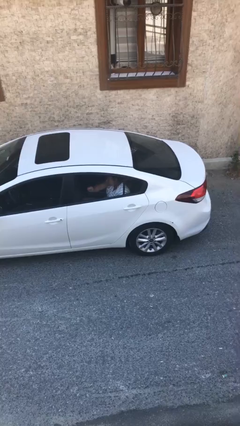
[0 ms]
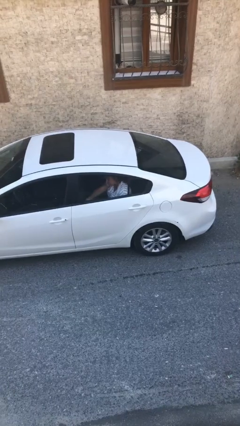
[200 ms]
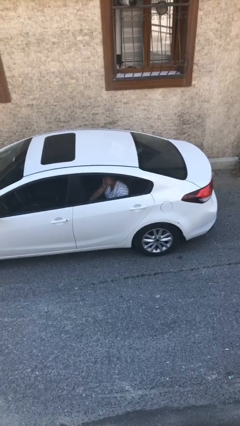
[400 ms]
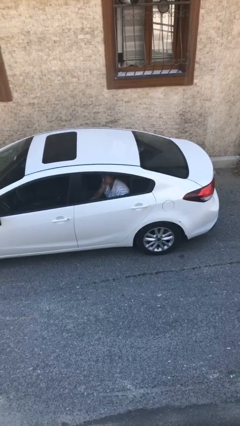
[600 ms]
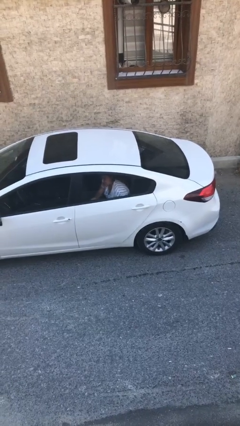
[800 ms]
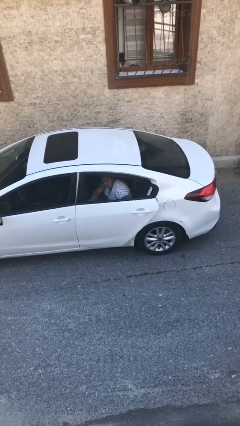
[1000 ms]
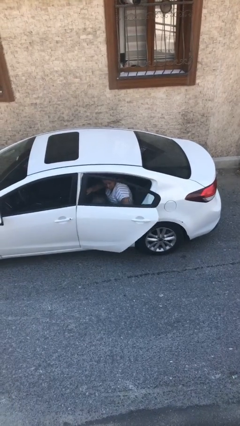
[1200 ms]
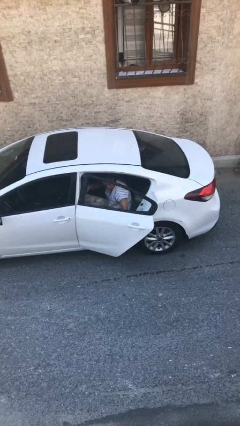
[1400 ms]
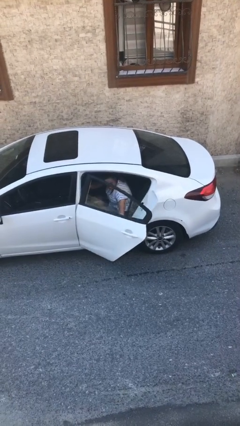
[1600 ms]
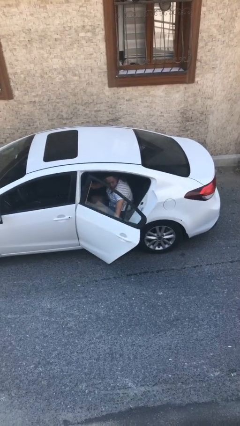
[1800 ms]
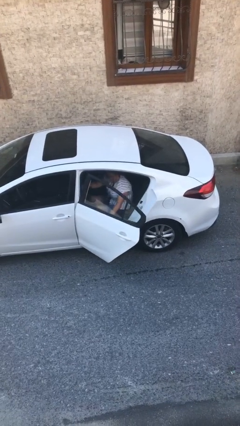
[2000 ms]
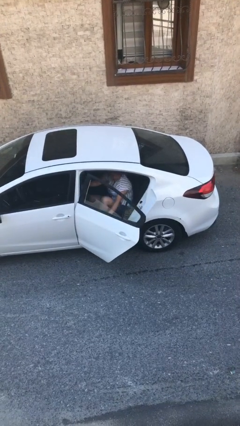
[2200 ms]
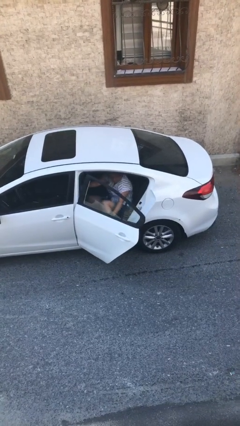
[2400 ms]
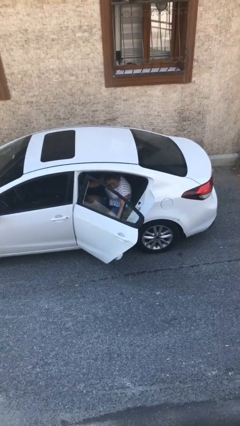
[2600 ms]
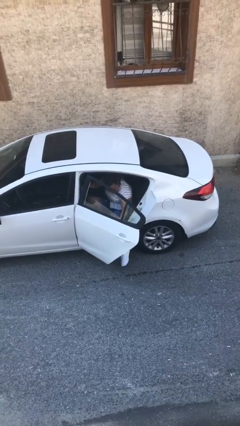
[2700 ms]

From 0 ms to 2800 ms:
person opens car door

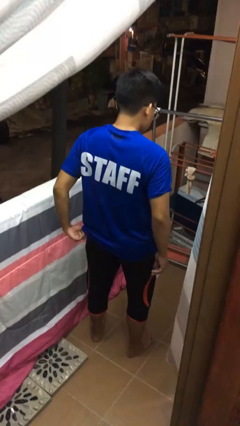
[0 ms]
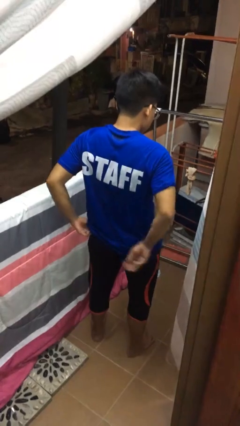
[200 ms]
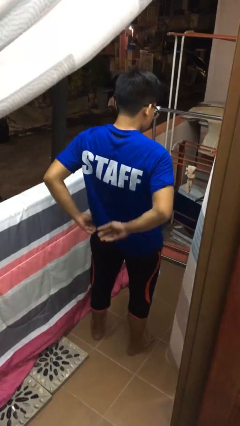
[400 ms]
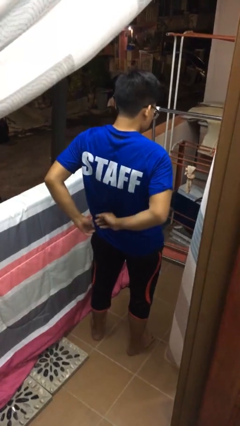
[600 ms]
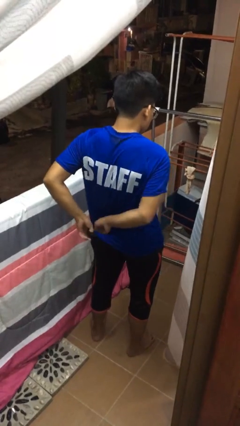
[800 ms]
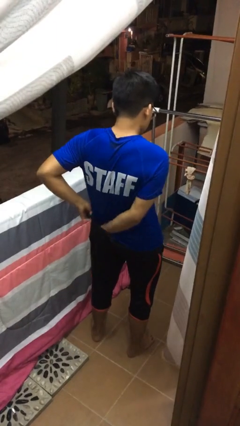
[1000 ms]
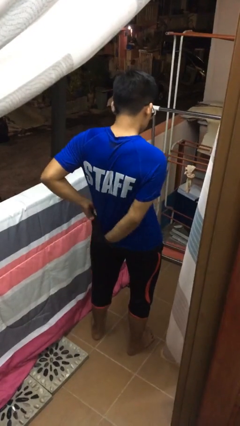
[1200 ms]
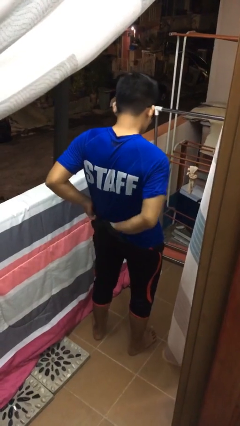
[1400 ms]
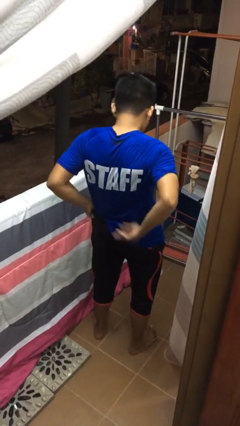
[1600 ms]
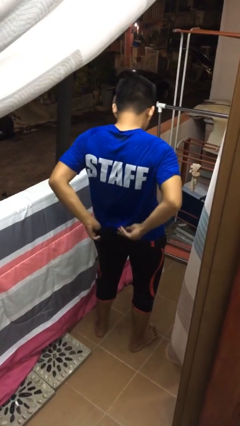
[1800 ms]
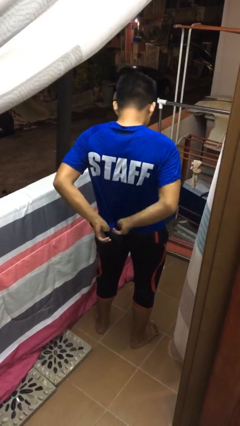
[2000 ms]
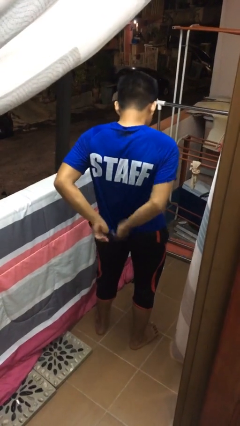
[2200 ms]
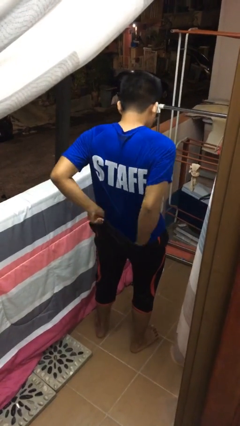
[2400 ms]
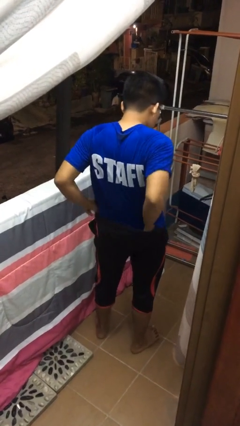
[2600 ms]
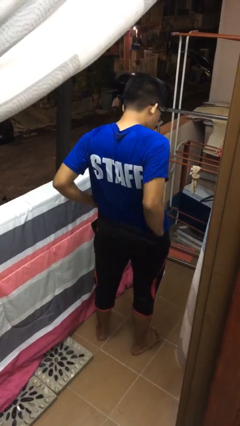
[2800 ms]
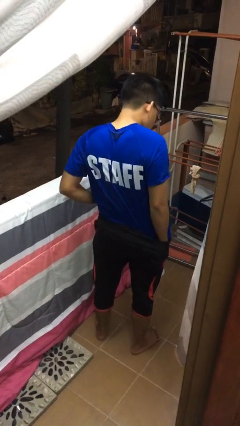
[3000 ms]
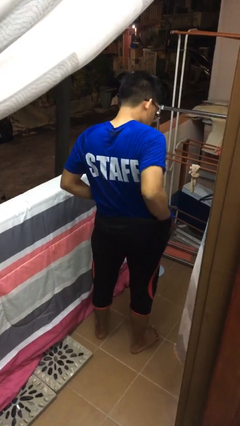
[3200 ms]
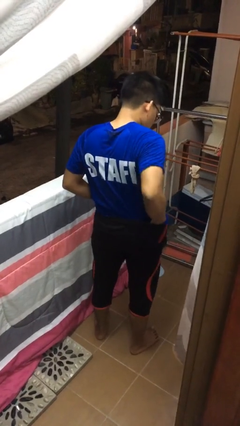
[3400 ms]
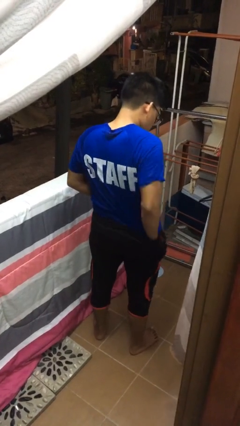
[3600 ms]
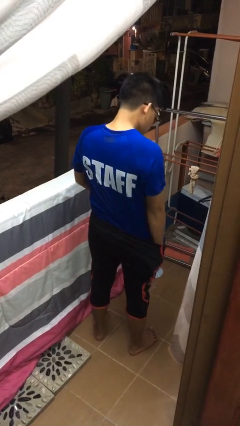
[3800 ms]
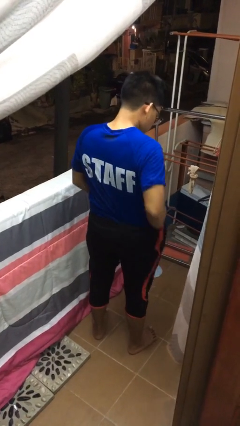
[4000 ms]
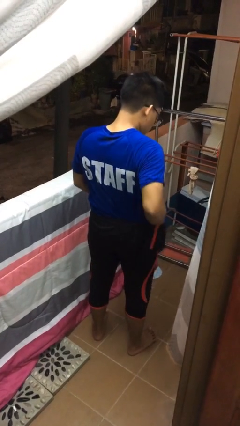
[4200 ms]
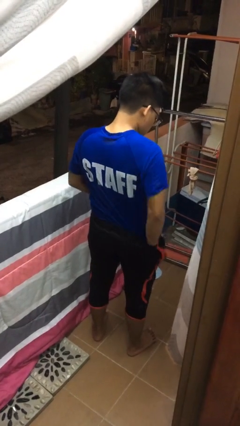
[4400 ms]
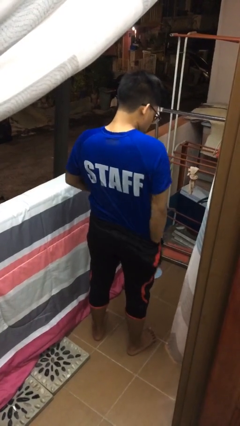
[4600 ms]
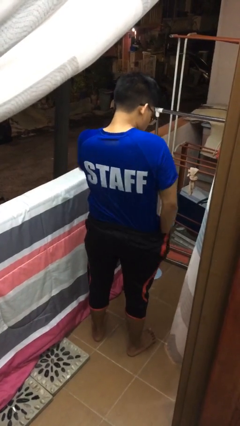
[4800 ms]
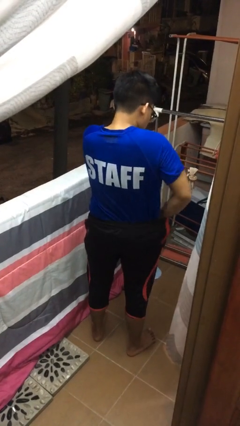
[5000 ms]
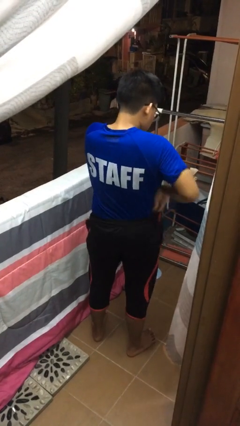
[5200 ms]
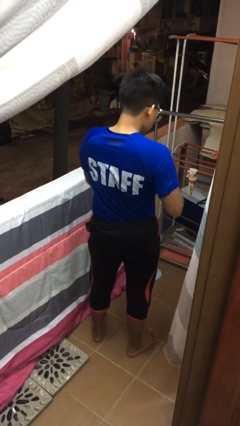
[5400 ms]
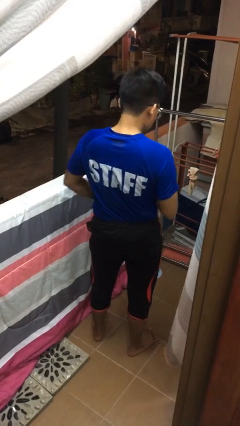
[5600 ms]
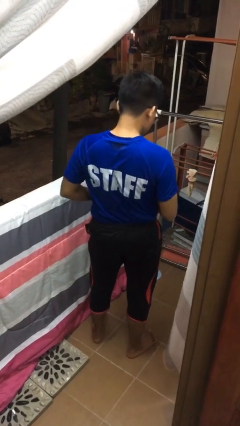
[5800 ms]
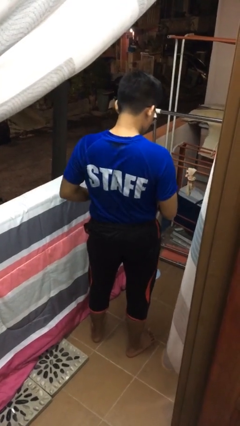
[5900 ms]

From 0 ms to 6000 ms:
person tucks in shirt

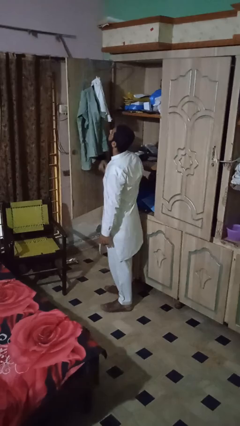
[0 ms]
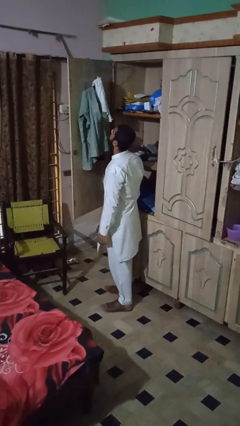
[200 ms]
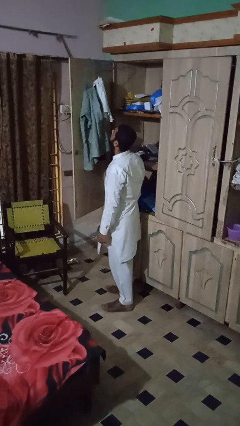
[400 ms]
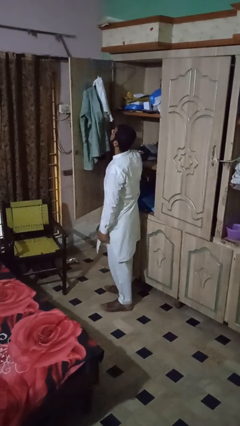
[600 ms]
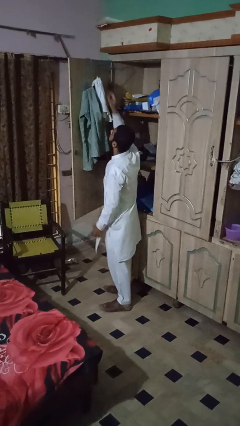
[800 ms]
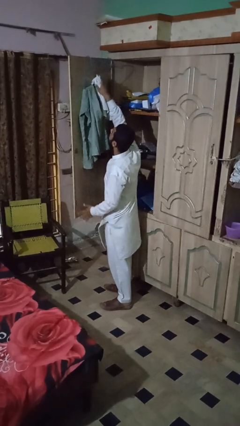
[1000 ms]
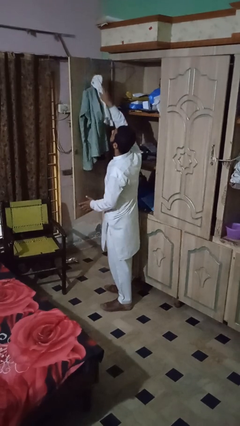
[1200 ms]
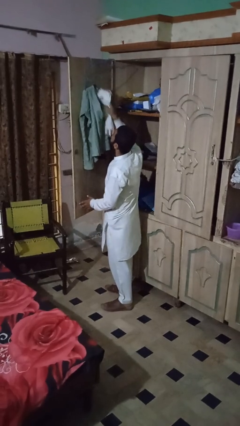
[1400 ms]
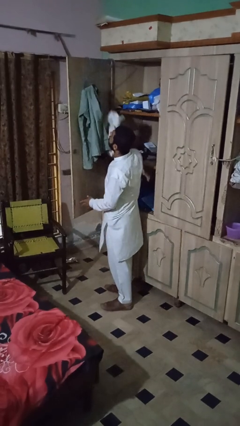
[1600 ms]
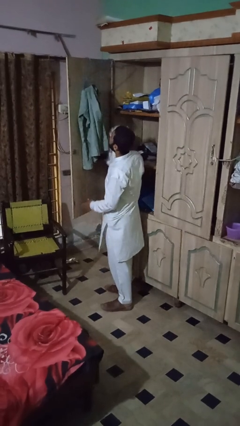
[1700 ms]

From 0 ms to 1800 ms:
person takes clothes from closet

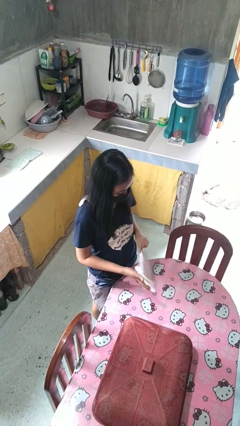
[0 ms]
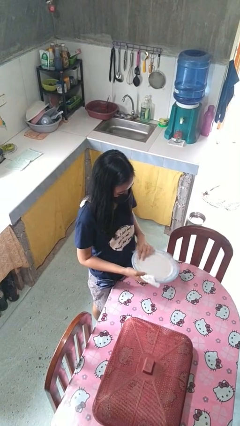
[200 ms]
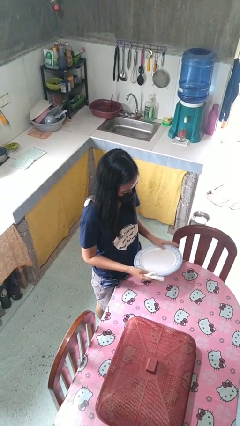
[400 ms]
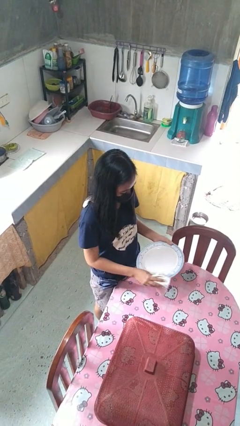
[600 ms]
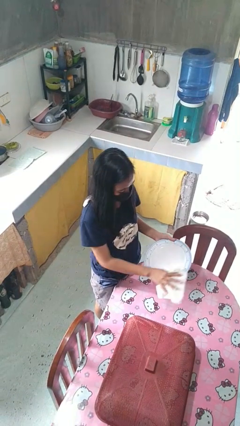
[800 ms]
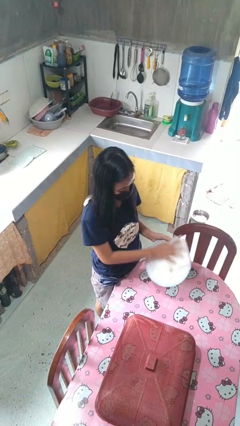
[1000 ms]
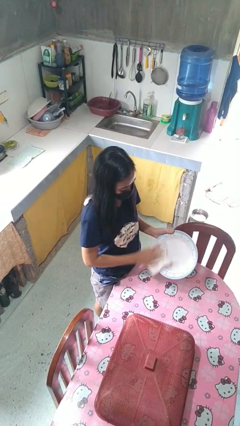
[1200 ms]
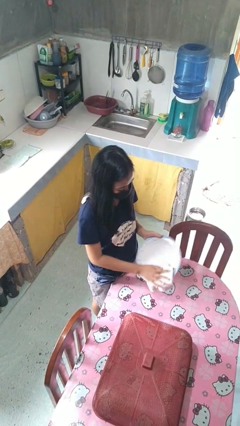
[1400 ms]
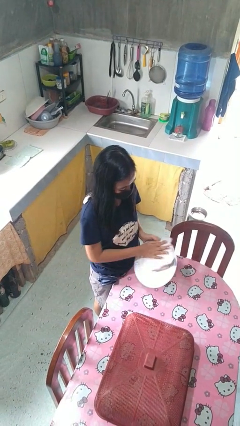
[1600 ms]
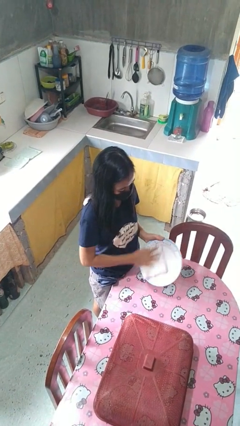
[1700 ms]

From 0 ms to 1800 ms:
person dries dish

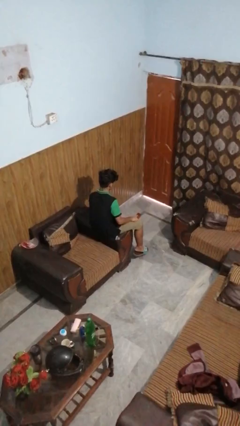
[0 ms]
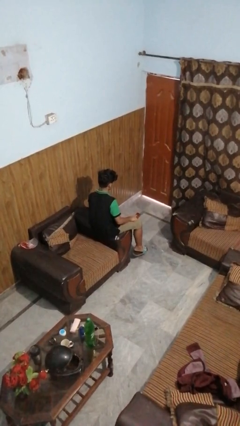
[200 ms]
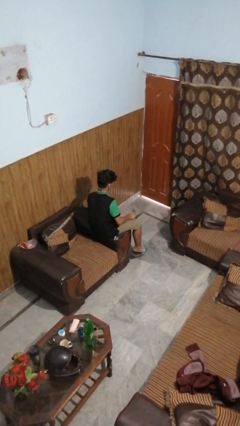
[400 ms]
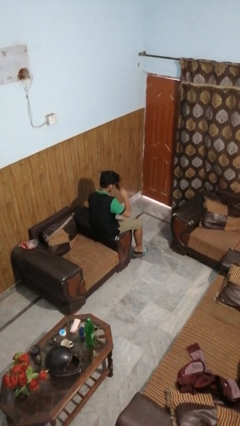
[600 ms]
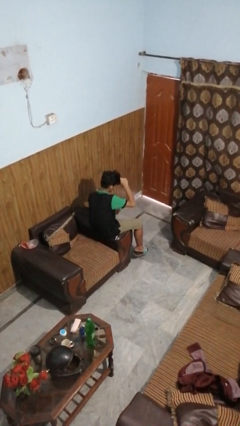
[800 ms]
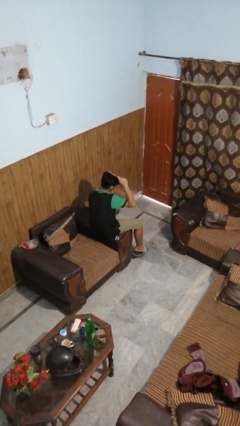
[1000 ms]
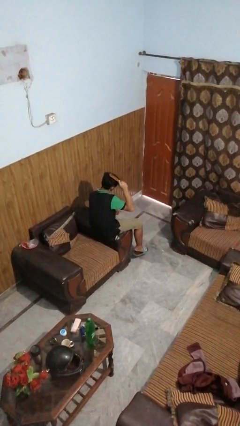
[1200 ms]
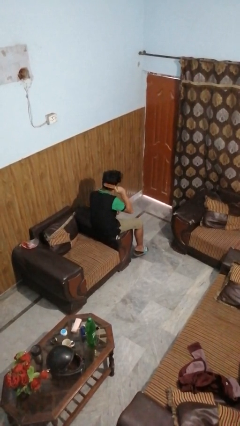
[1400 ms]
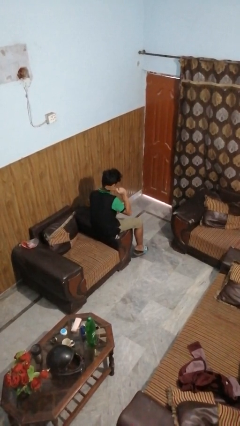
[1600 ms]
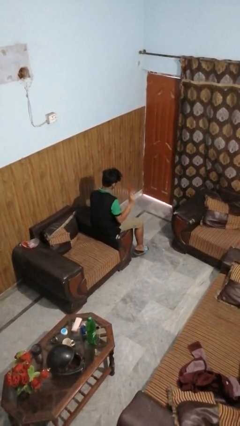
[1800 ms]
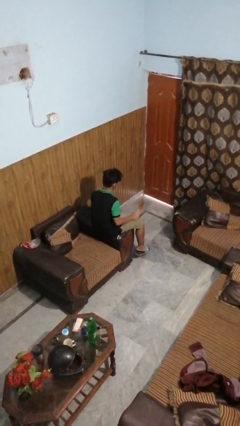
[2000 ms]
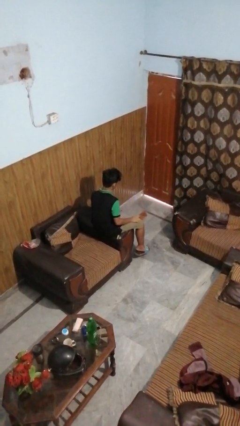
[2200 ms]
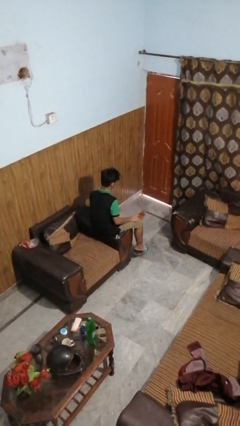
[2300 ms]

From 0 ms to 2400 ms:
person brushes hair

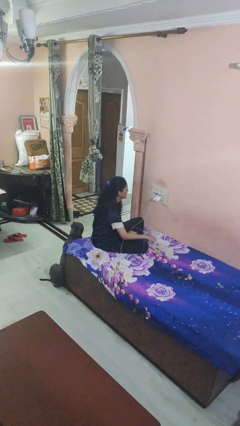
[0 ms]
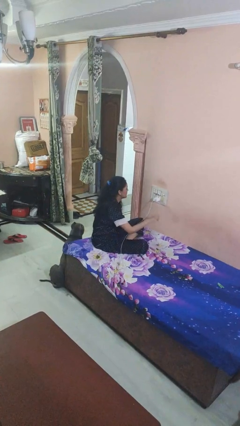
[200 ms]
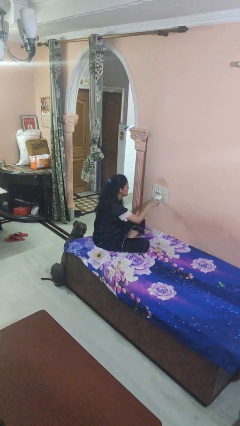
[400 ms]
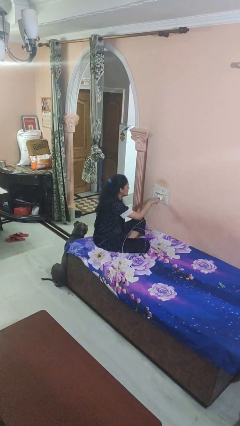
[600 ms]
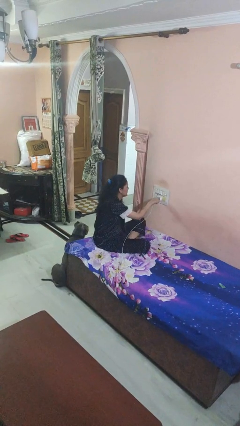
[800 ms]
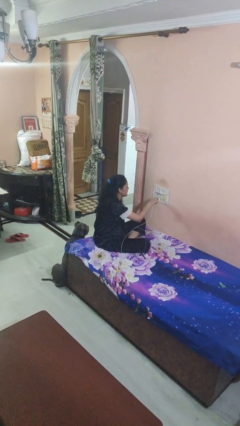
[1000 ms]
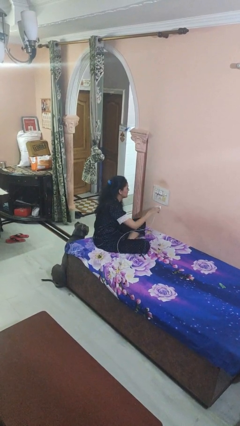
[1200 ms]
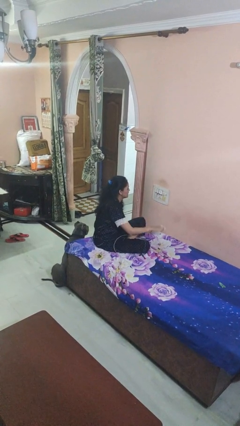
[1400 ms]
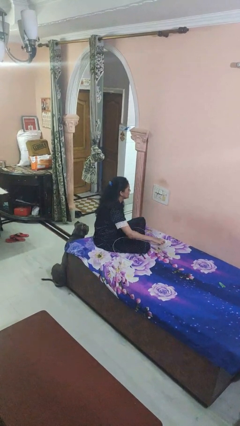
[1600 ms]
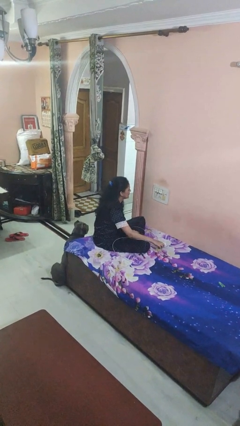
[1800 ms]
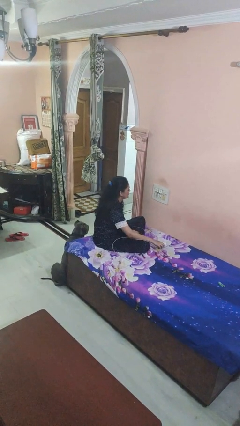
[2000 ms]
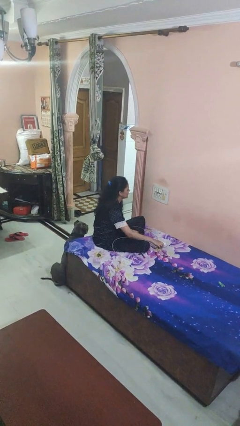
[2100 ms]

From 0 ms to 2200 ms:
person unplugs from electrical socket
